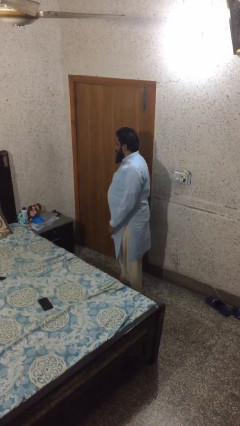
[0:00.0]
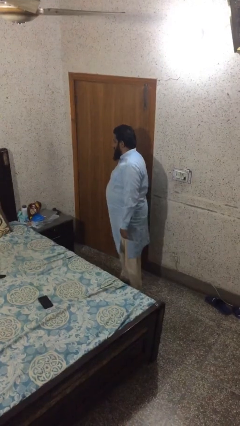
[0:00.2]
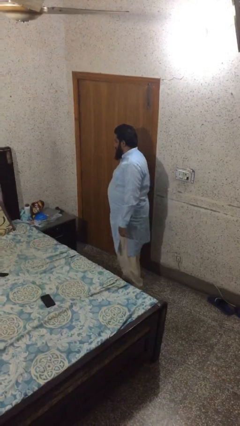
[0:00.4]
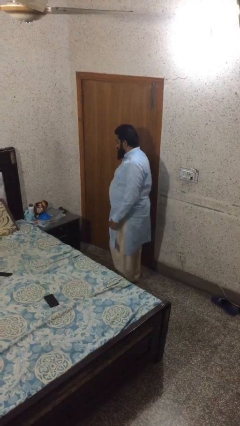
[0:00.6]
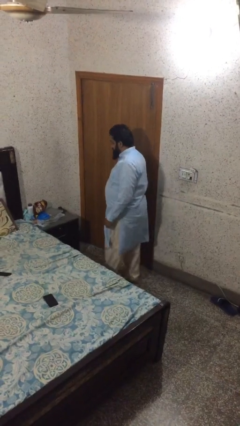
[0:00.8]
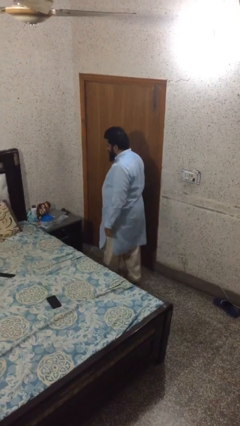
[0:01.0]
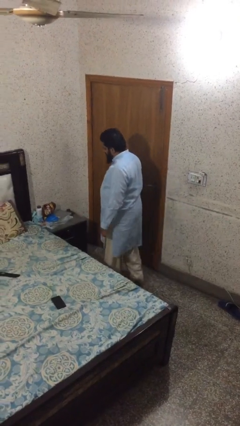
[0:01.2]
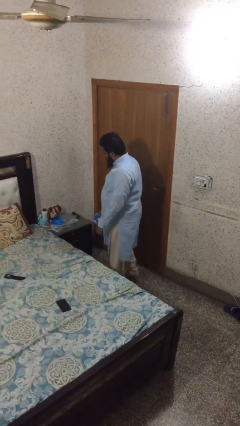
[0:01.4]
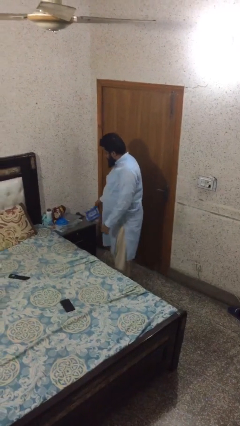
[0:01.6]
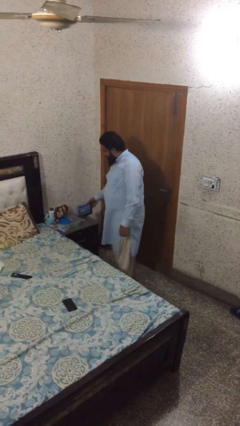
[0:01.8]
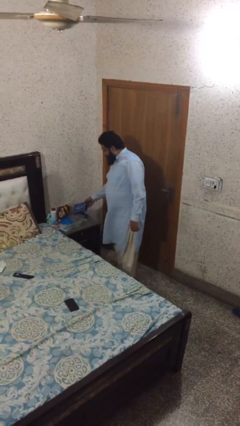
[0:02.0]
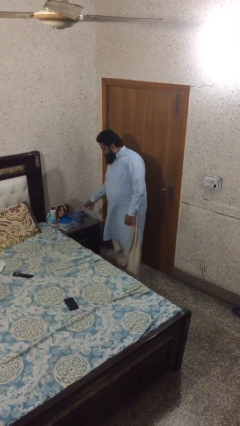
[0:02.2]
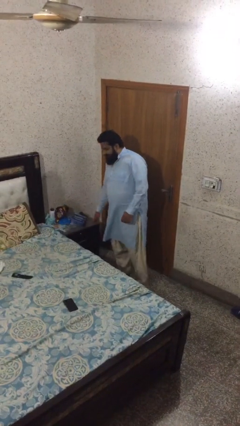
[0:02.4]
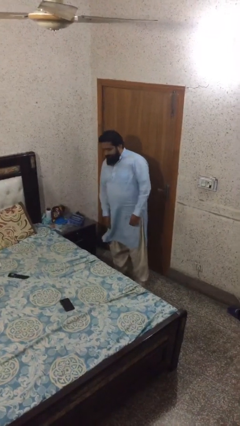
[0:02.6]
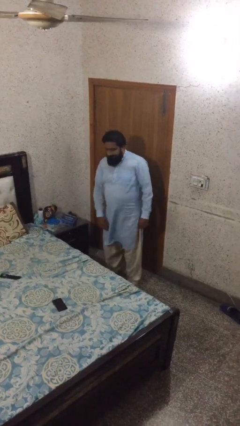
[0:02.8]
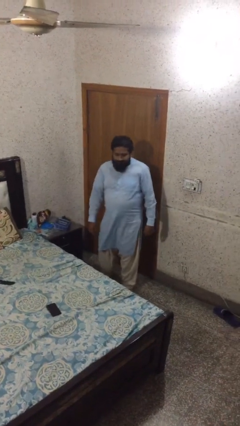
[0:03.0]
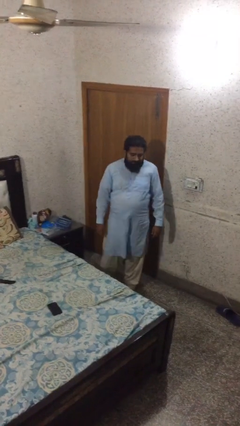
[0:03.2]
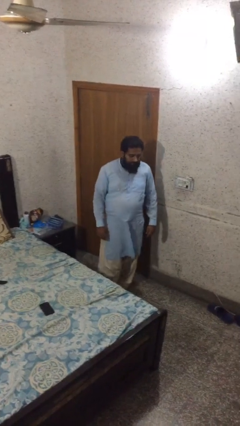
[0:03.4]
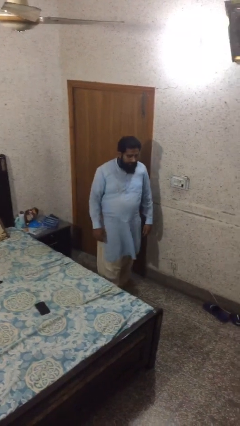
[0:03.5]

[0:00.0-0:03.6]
person puts down object on table

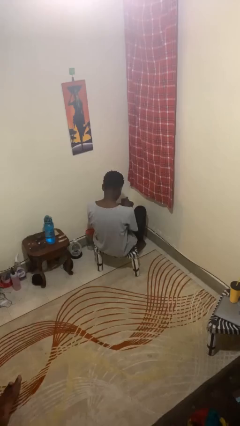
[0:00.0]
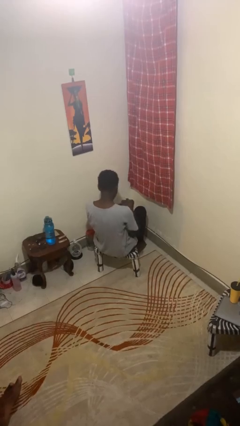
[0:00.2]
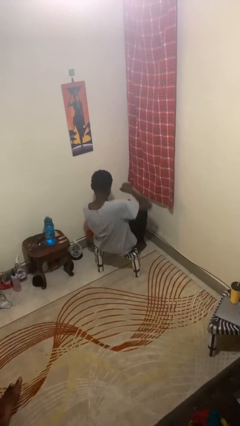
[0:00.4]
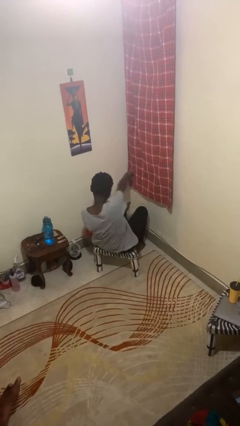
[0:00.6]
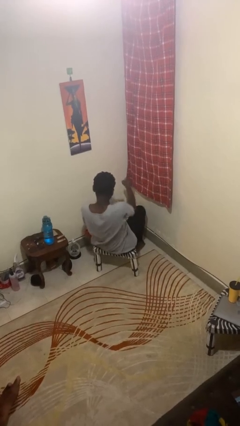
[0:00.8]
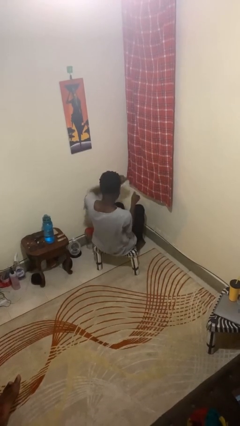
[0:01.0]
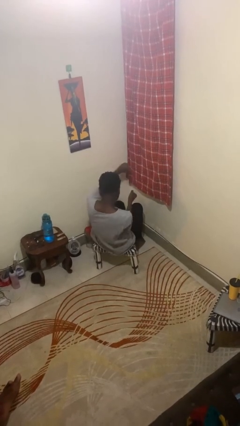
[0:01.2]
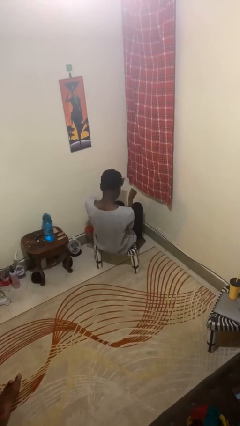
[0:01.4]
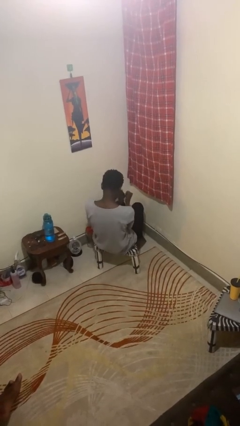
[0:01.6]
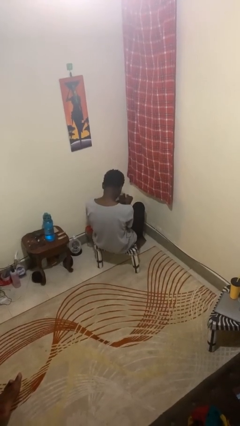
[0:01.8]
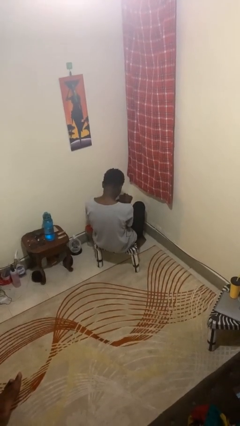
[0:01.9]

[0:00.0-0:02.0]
person punches

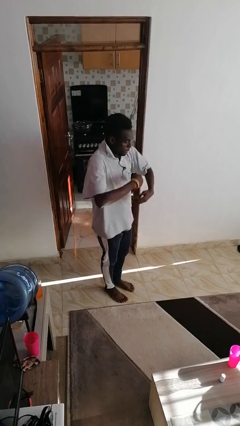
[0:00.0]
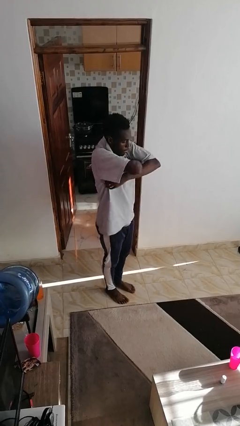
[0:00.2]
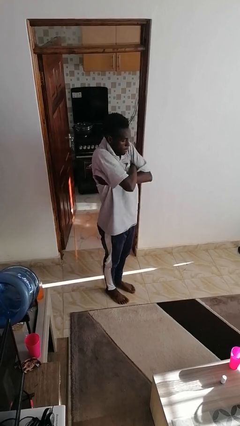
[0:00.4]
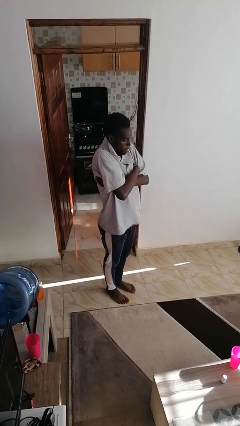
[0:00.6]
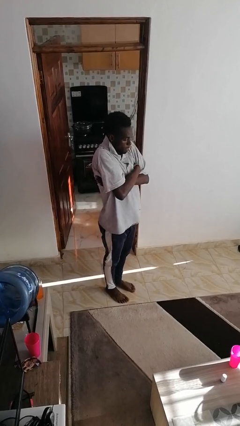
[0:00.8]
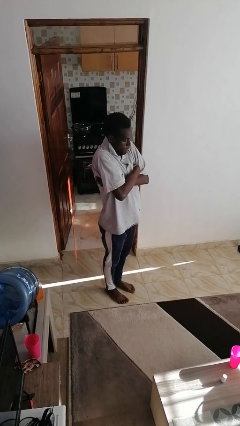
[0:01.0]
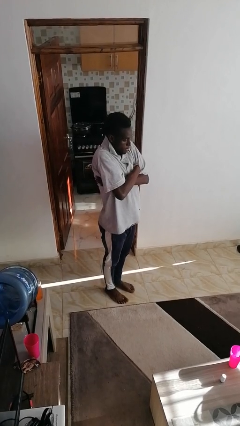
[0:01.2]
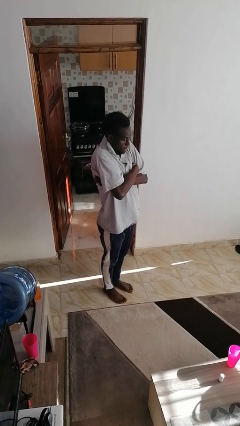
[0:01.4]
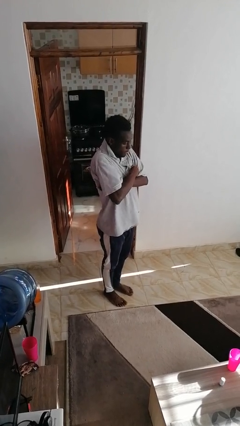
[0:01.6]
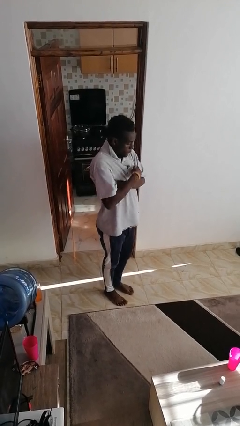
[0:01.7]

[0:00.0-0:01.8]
person crosses arms

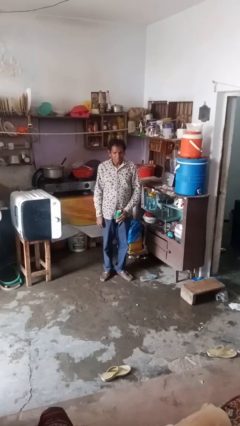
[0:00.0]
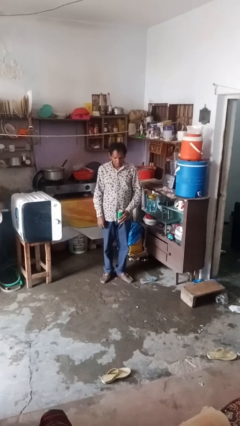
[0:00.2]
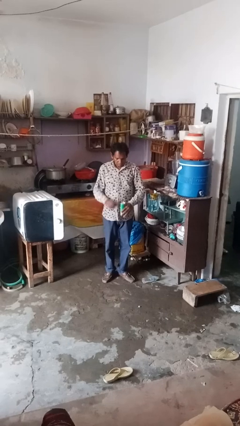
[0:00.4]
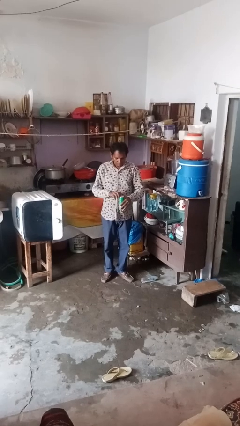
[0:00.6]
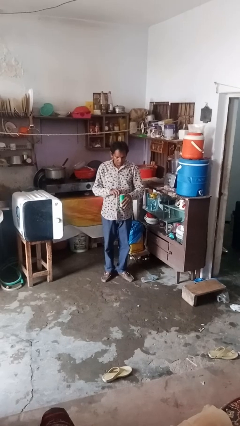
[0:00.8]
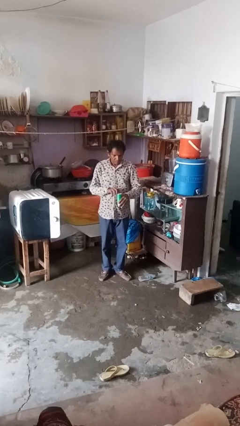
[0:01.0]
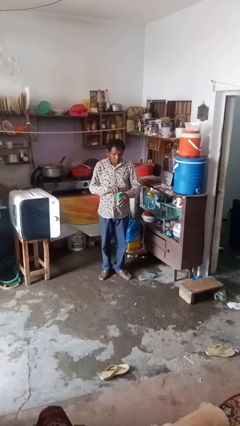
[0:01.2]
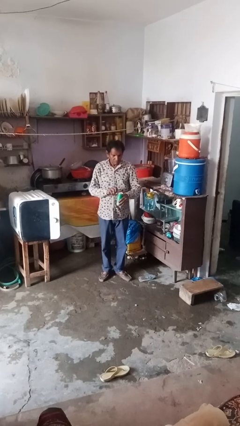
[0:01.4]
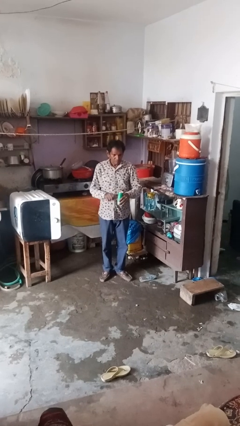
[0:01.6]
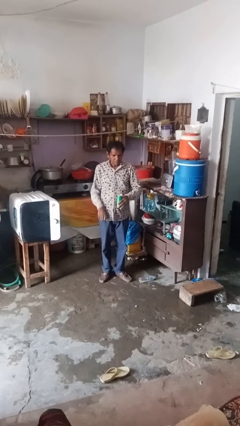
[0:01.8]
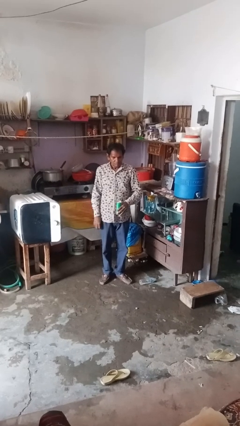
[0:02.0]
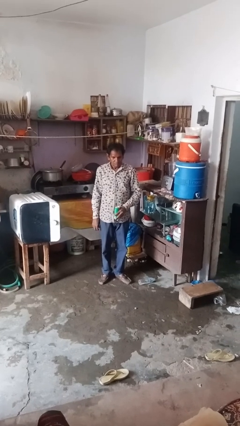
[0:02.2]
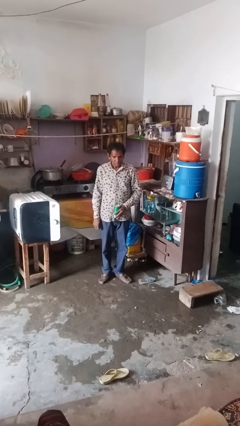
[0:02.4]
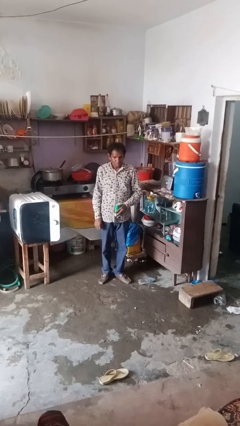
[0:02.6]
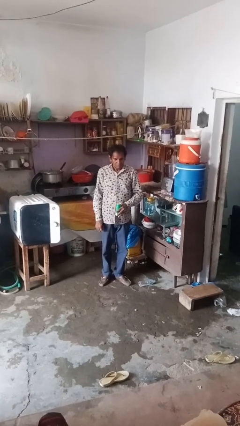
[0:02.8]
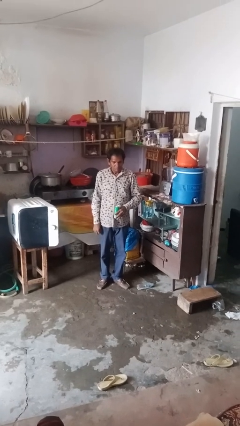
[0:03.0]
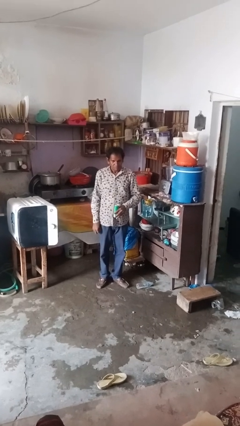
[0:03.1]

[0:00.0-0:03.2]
person opens beverage can

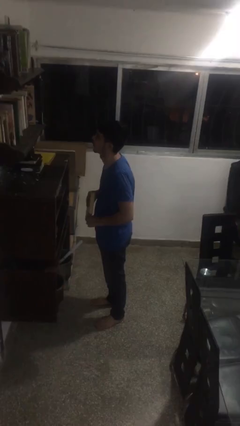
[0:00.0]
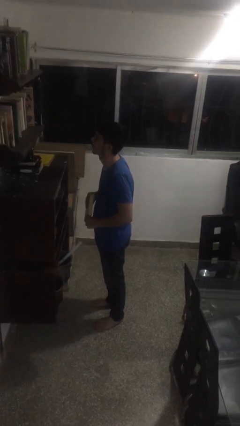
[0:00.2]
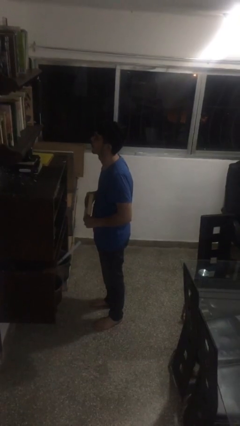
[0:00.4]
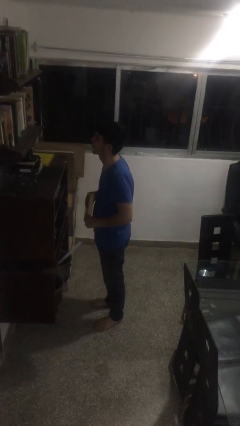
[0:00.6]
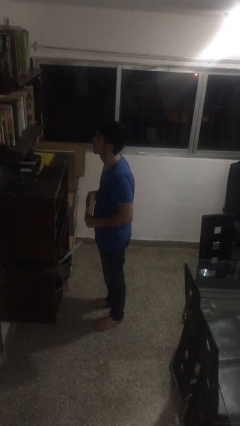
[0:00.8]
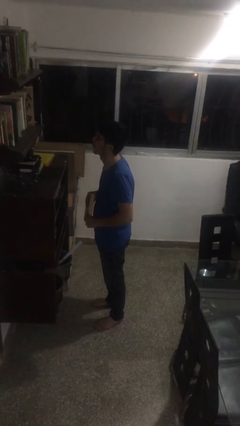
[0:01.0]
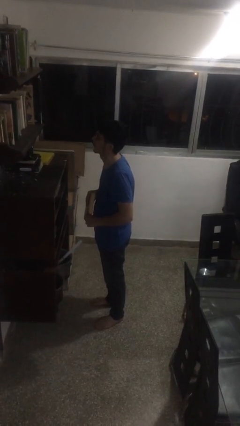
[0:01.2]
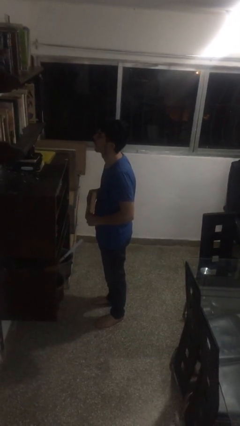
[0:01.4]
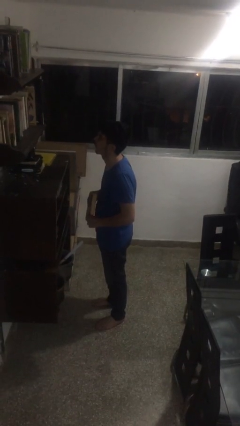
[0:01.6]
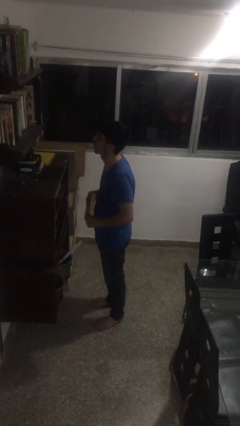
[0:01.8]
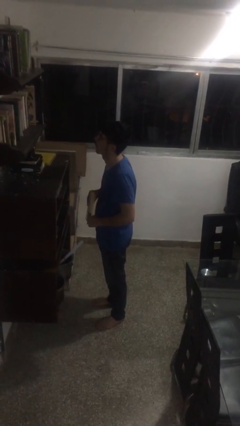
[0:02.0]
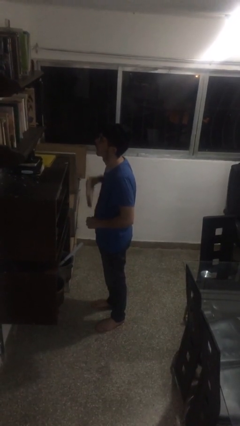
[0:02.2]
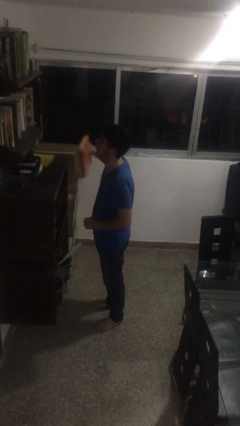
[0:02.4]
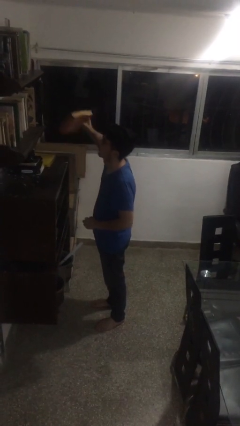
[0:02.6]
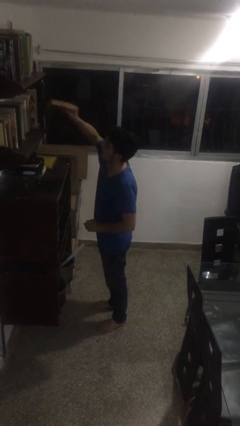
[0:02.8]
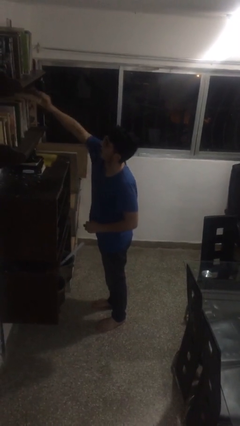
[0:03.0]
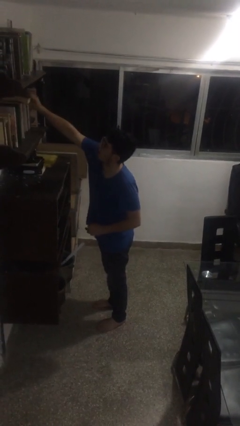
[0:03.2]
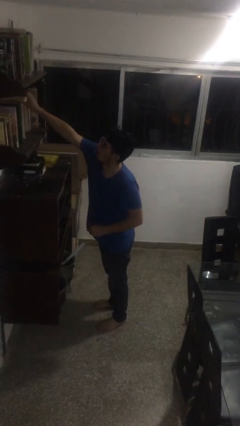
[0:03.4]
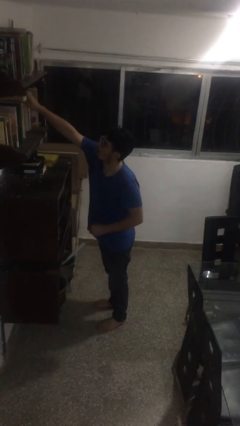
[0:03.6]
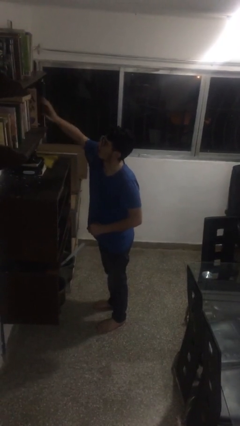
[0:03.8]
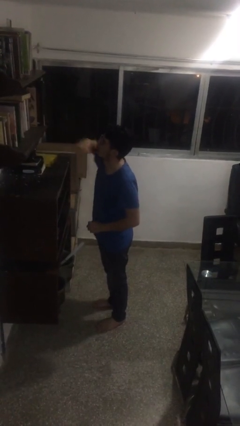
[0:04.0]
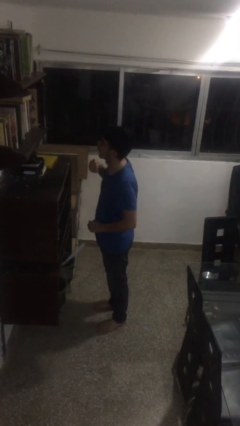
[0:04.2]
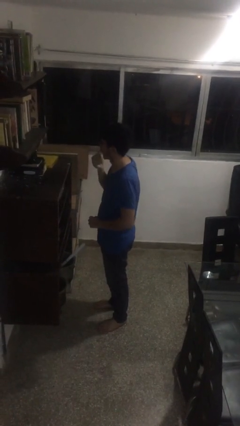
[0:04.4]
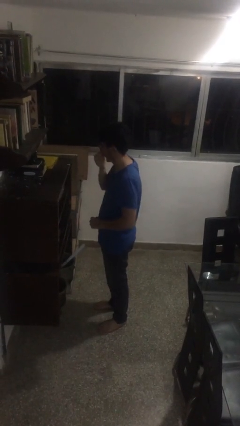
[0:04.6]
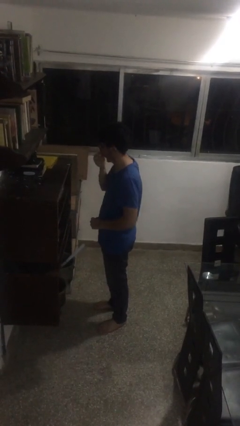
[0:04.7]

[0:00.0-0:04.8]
person puts down object on shelf

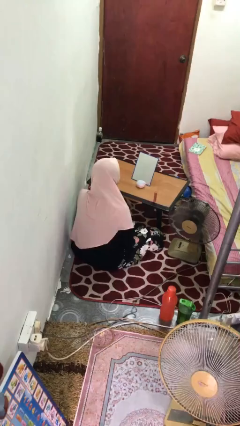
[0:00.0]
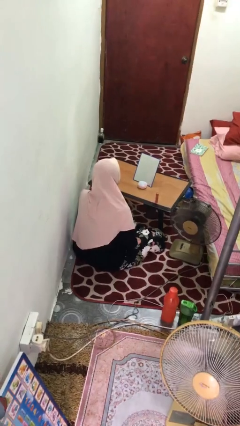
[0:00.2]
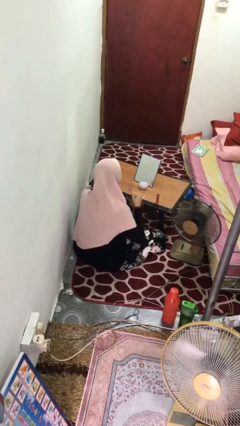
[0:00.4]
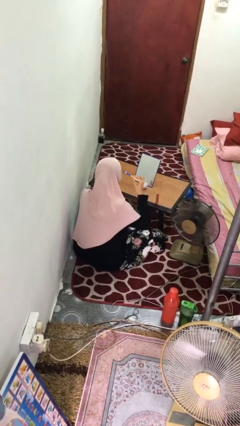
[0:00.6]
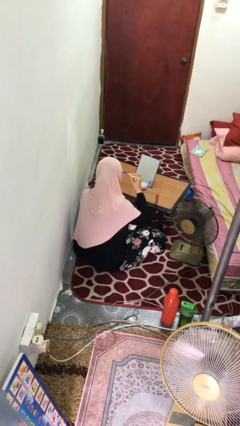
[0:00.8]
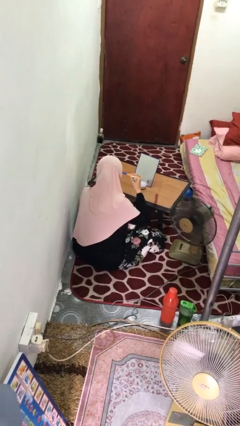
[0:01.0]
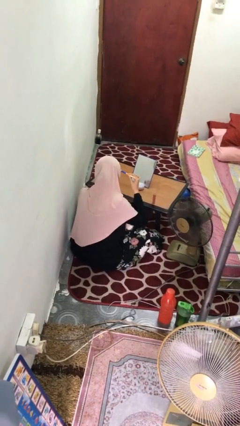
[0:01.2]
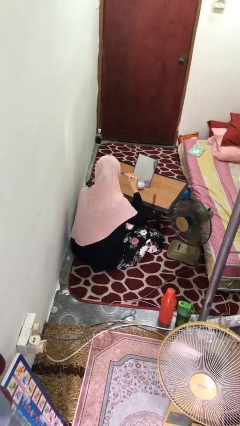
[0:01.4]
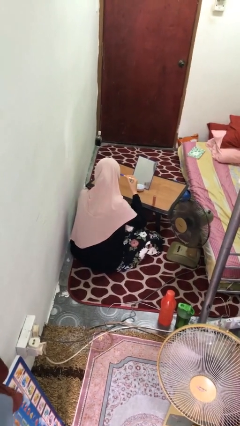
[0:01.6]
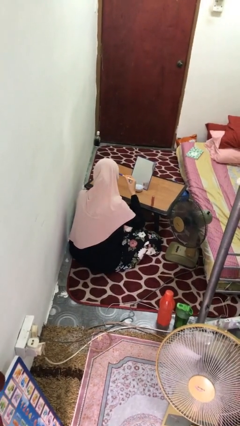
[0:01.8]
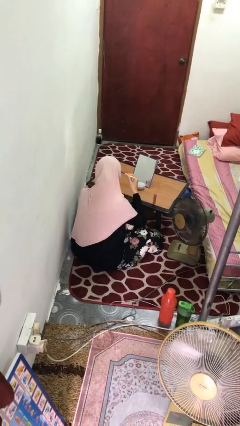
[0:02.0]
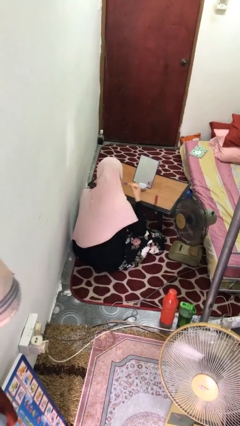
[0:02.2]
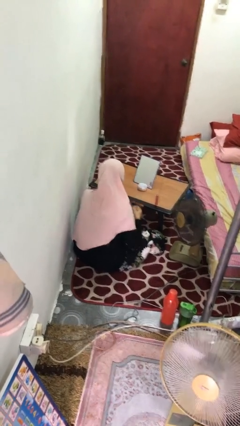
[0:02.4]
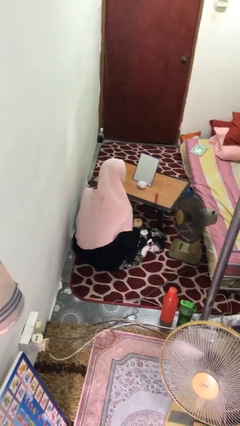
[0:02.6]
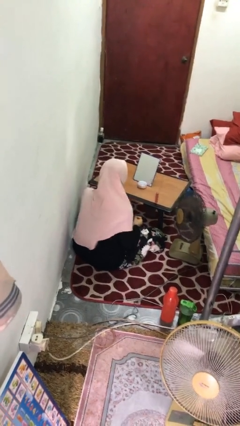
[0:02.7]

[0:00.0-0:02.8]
person applies eye makeup
